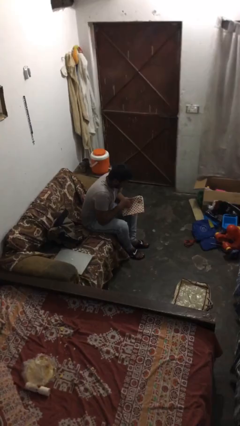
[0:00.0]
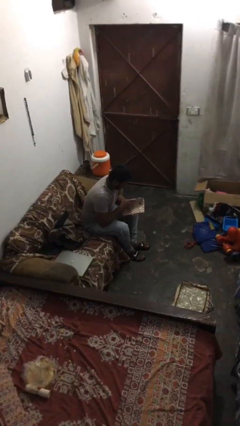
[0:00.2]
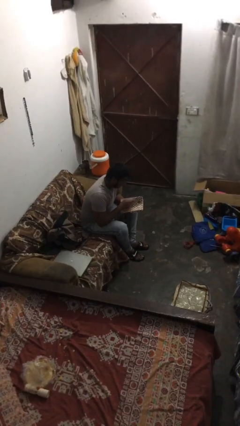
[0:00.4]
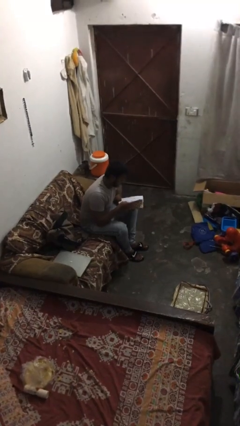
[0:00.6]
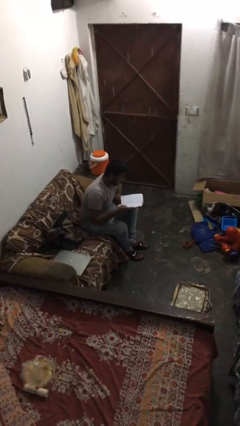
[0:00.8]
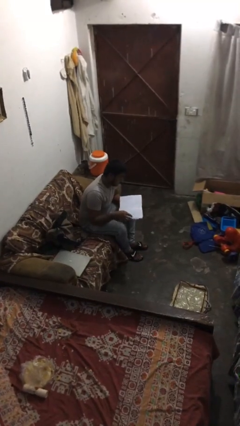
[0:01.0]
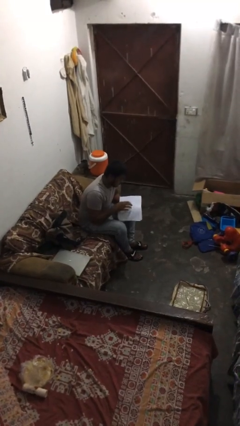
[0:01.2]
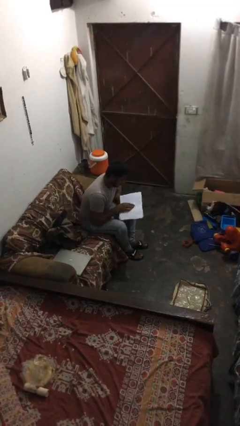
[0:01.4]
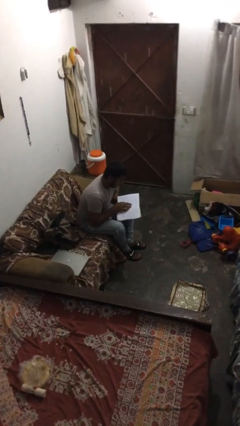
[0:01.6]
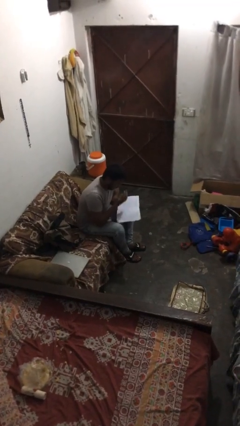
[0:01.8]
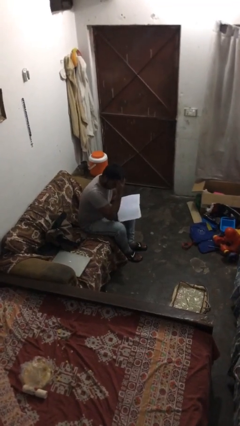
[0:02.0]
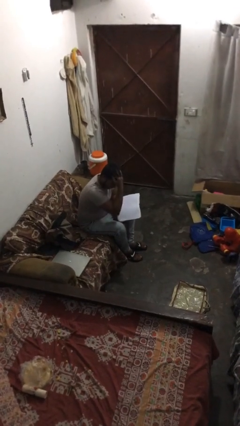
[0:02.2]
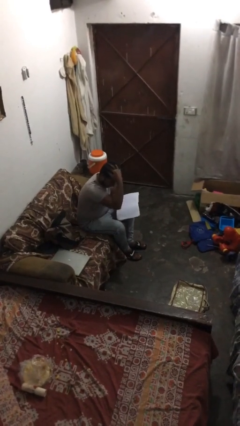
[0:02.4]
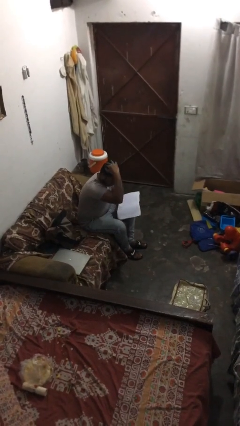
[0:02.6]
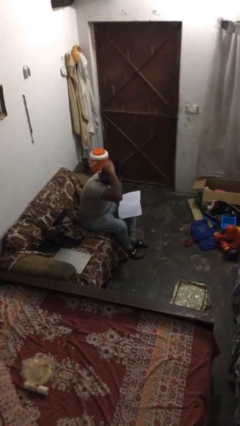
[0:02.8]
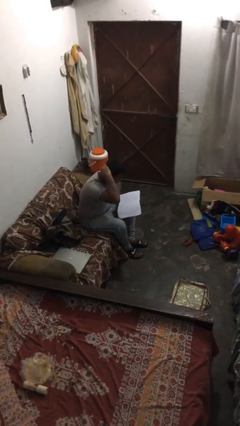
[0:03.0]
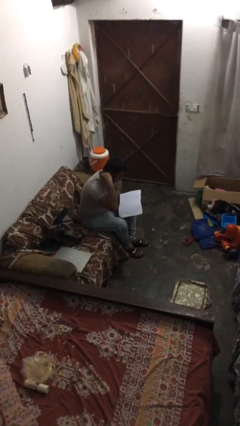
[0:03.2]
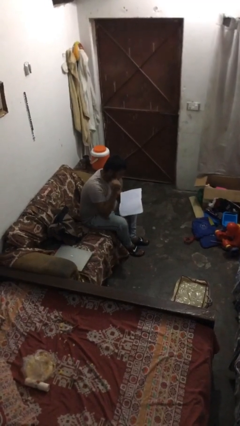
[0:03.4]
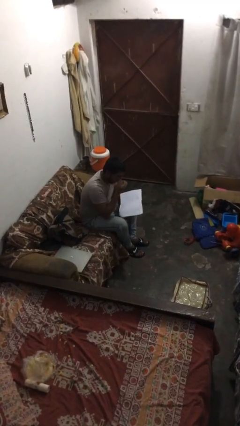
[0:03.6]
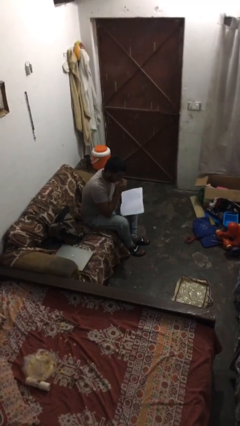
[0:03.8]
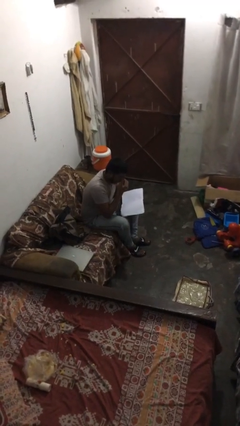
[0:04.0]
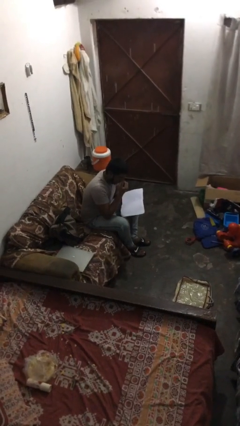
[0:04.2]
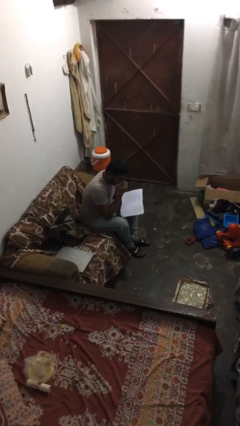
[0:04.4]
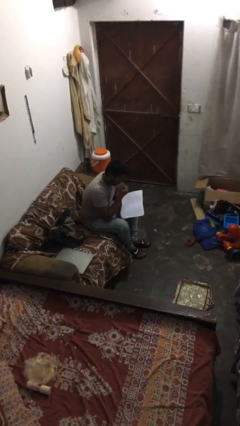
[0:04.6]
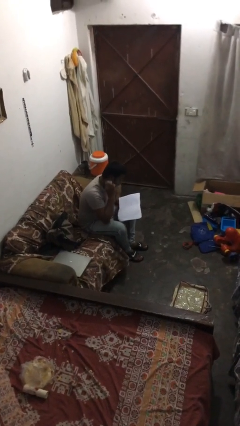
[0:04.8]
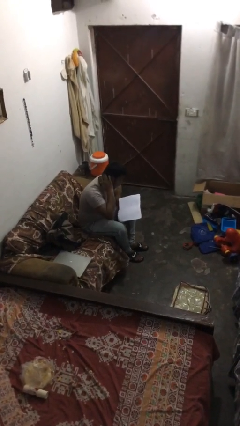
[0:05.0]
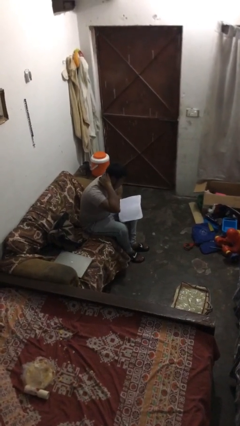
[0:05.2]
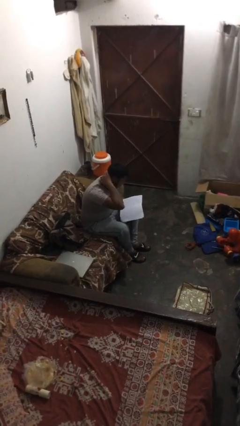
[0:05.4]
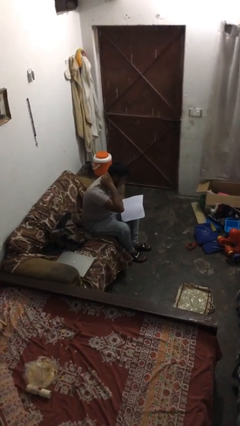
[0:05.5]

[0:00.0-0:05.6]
person reads document

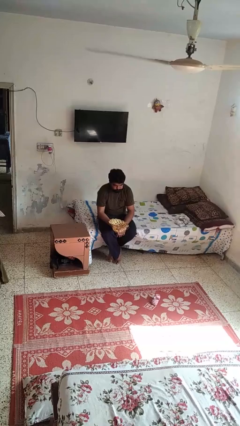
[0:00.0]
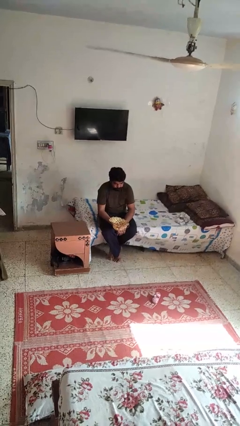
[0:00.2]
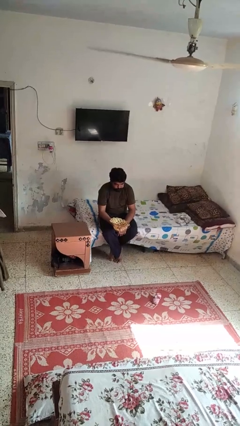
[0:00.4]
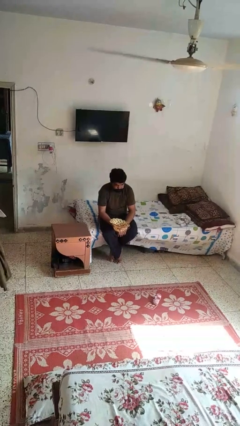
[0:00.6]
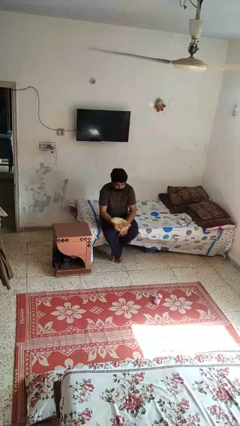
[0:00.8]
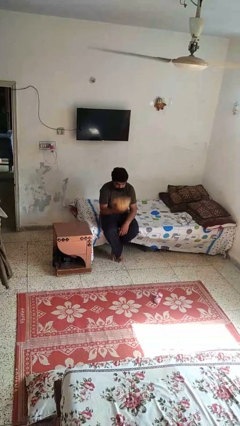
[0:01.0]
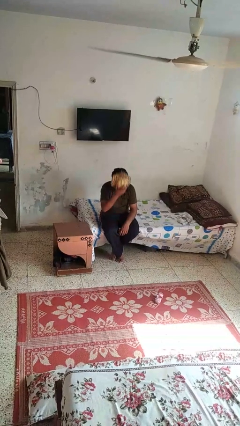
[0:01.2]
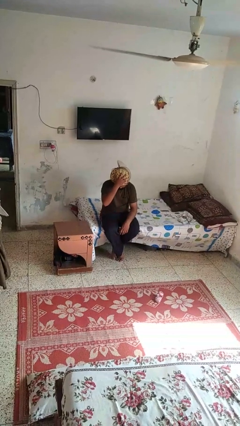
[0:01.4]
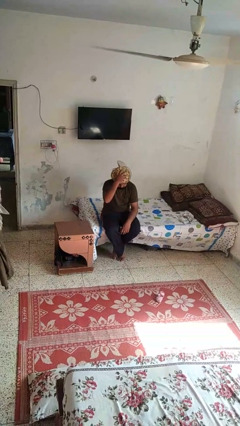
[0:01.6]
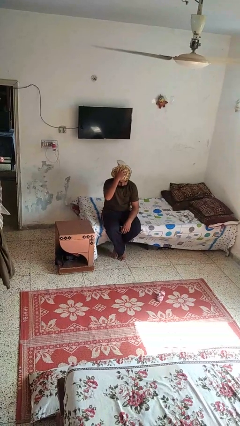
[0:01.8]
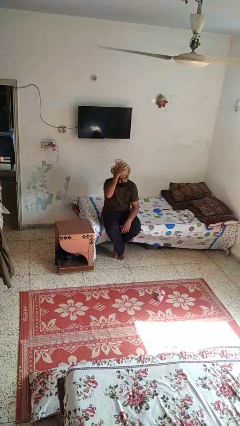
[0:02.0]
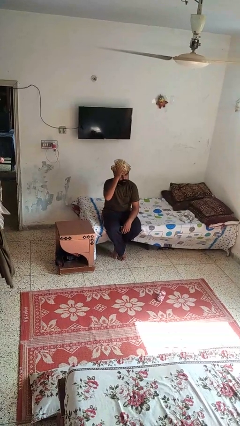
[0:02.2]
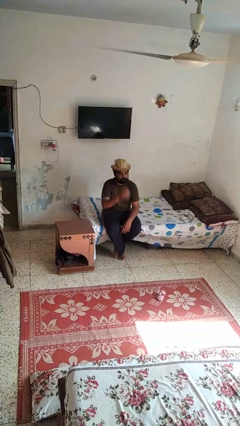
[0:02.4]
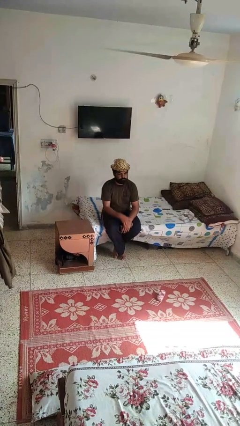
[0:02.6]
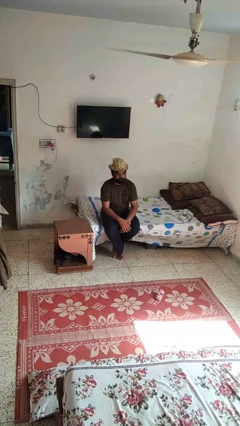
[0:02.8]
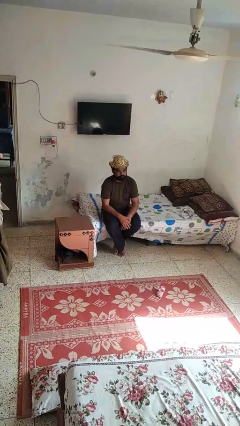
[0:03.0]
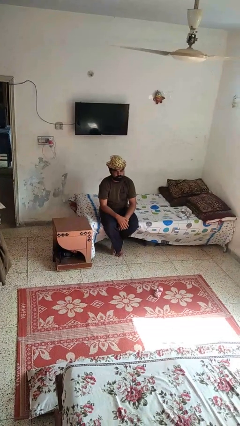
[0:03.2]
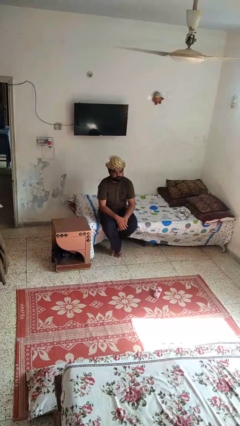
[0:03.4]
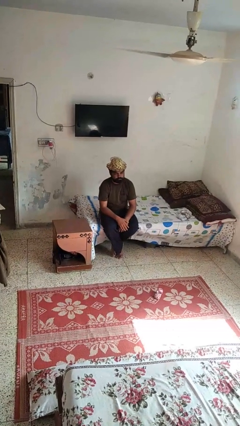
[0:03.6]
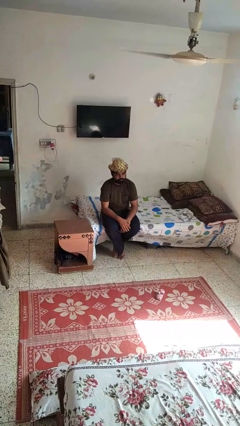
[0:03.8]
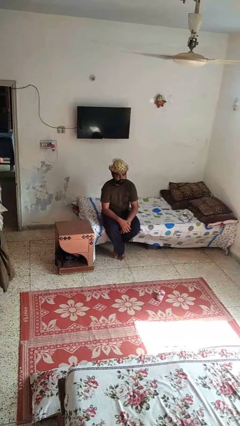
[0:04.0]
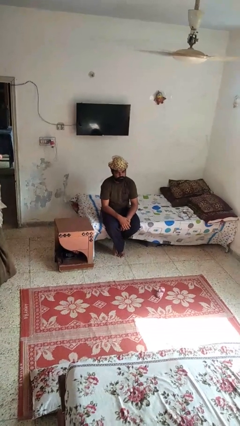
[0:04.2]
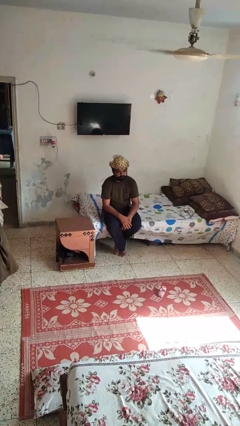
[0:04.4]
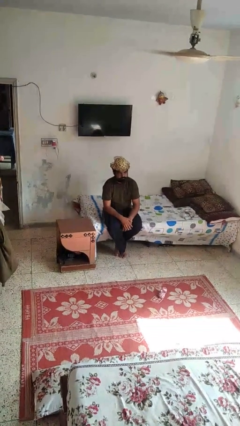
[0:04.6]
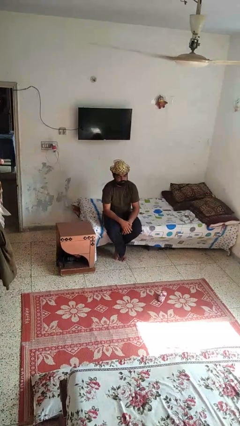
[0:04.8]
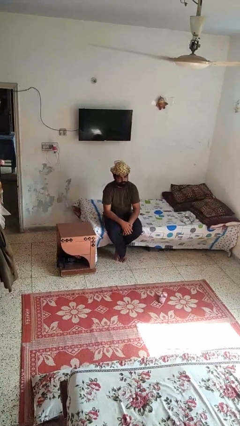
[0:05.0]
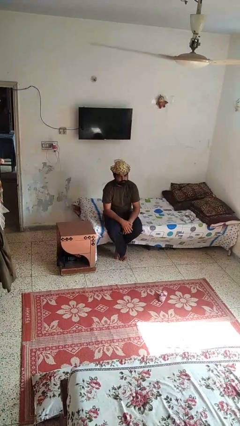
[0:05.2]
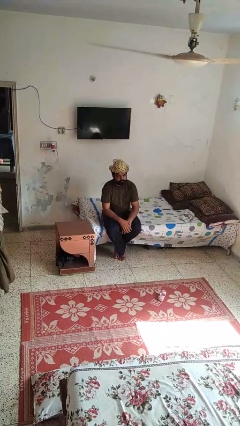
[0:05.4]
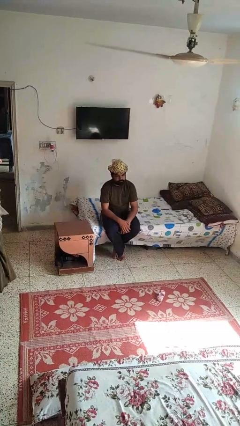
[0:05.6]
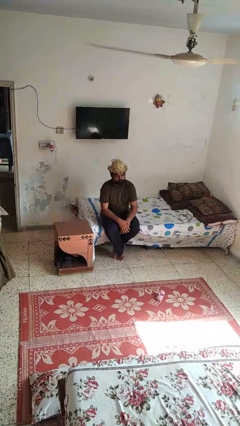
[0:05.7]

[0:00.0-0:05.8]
person puts on hat

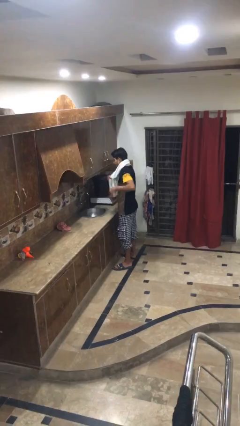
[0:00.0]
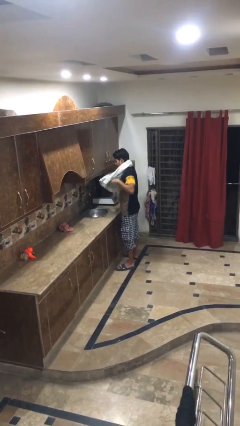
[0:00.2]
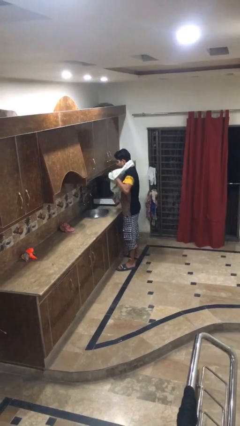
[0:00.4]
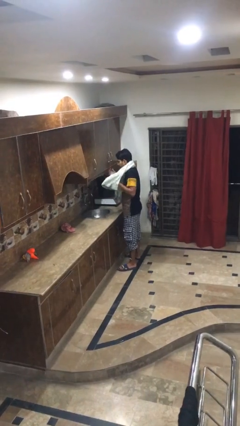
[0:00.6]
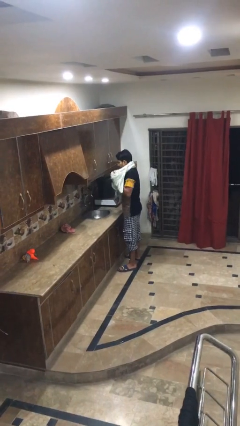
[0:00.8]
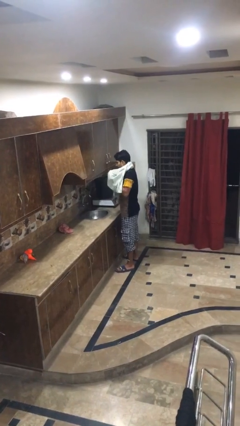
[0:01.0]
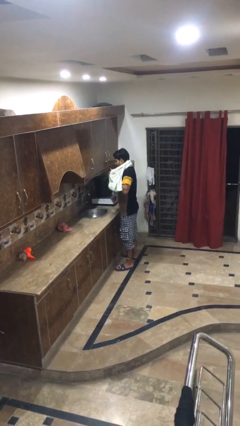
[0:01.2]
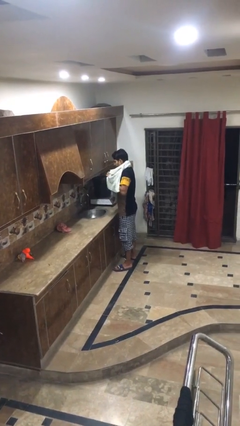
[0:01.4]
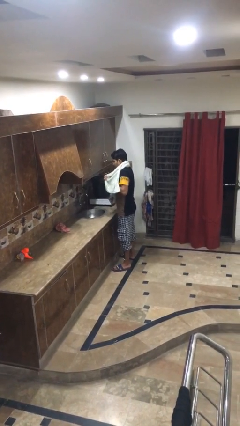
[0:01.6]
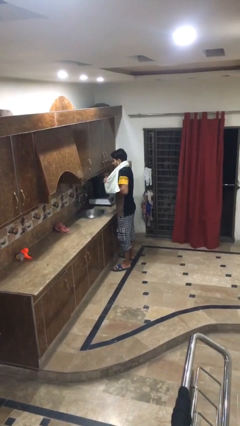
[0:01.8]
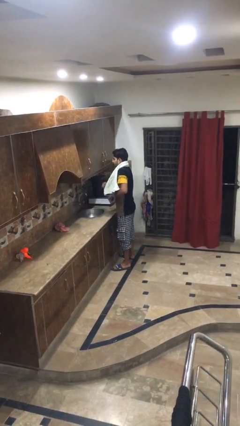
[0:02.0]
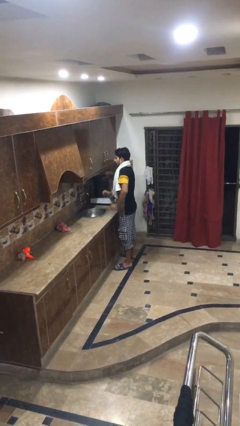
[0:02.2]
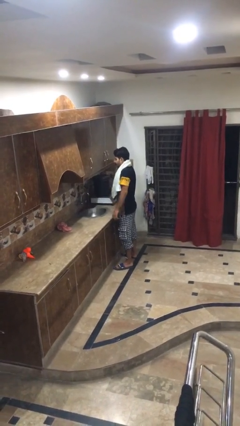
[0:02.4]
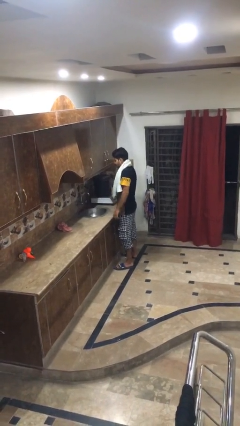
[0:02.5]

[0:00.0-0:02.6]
person dries hands with towel

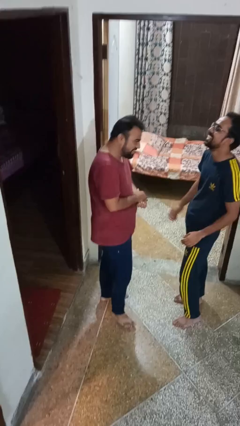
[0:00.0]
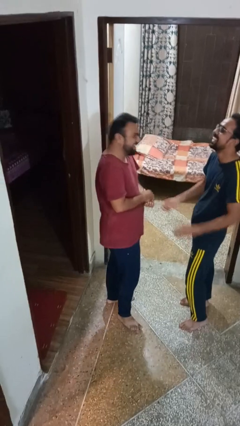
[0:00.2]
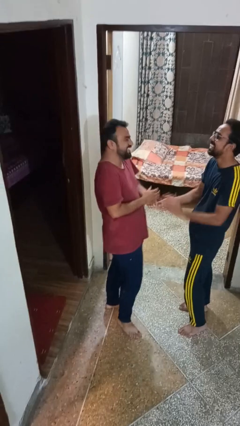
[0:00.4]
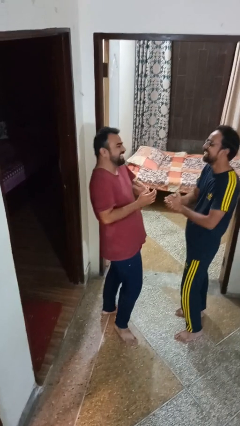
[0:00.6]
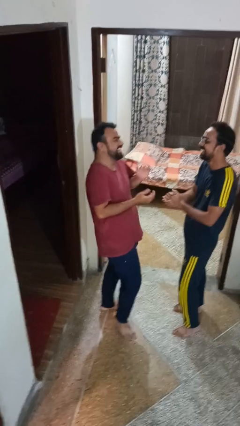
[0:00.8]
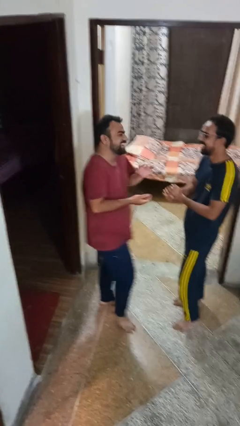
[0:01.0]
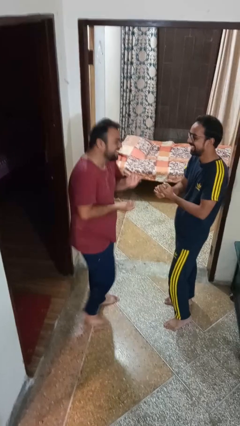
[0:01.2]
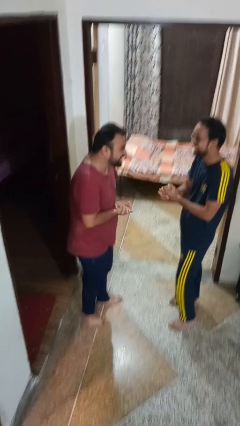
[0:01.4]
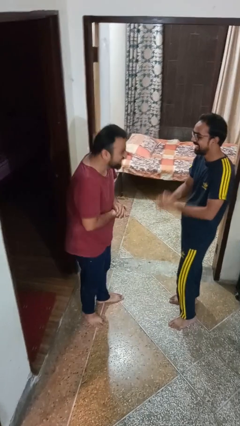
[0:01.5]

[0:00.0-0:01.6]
person laughs with person

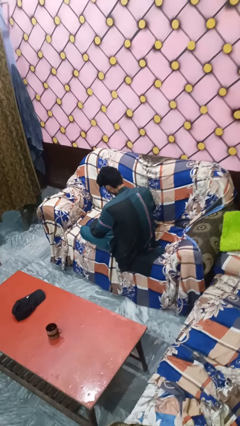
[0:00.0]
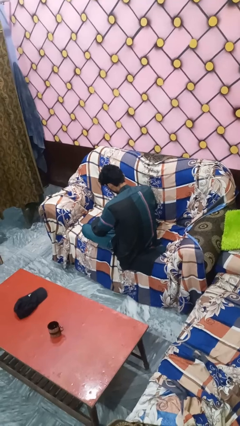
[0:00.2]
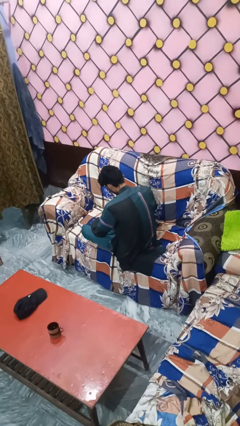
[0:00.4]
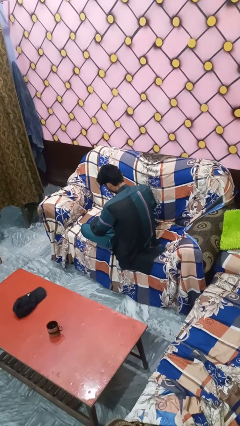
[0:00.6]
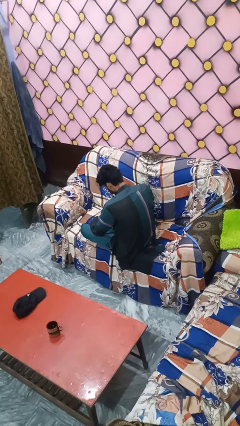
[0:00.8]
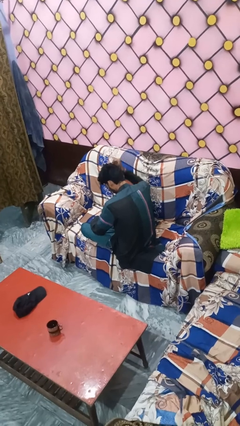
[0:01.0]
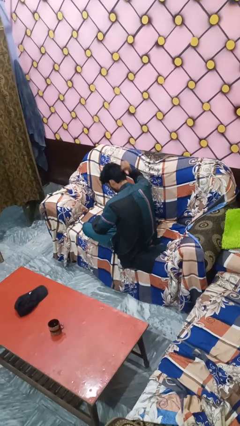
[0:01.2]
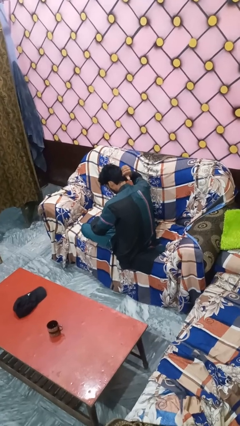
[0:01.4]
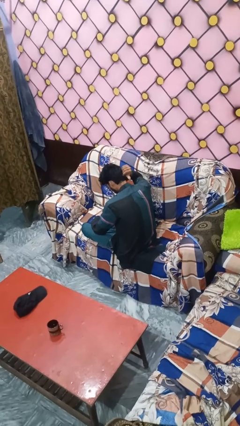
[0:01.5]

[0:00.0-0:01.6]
person gestures behind me

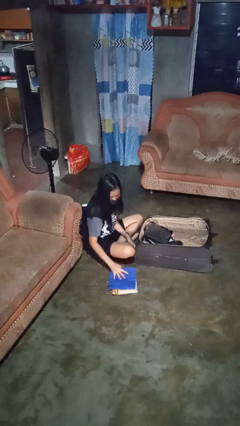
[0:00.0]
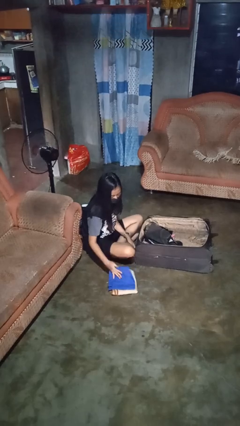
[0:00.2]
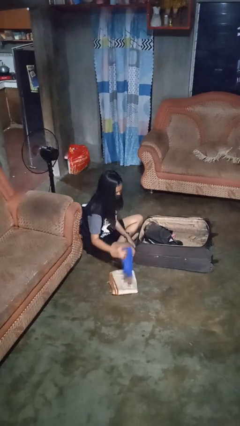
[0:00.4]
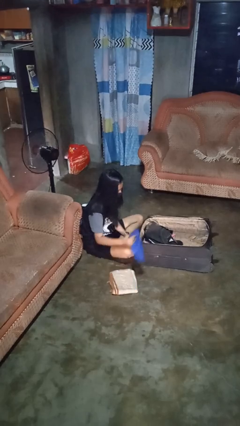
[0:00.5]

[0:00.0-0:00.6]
person loads clothes into suitcase
